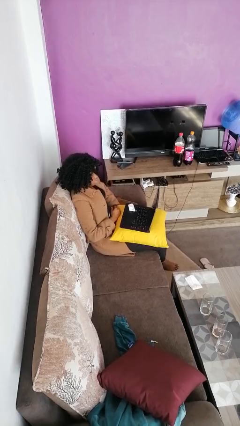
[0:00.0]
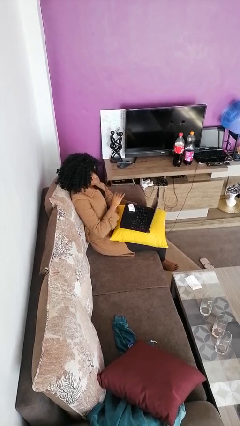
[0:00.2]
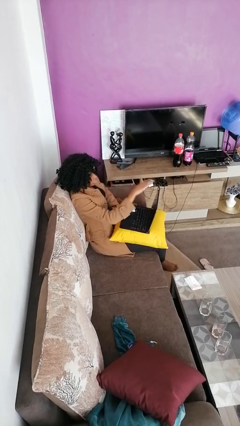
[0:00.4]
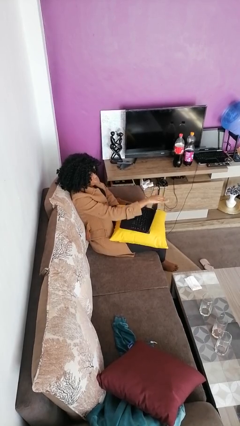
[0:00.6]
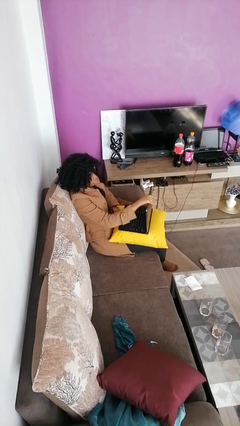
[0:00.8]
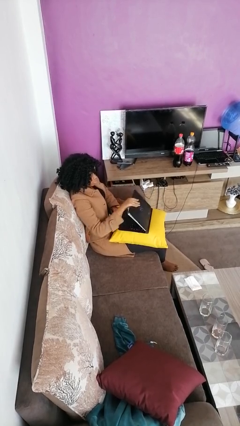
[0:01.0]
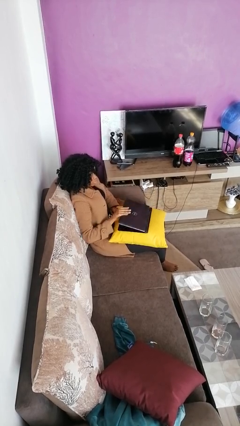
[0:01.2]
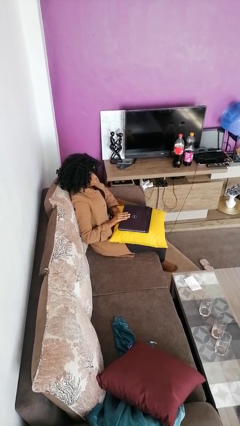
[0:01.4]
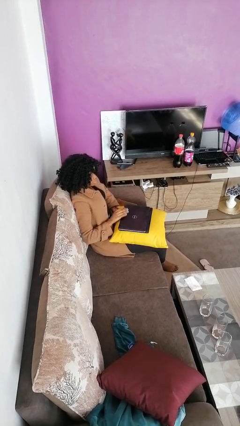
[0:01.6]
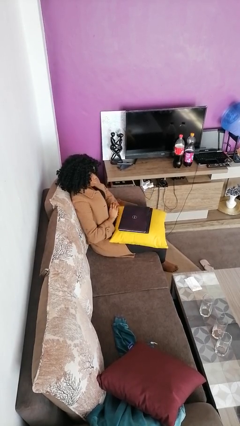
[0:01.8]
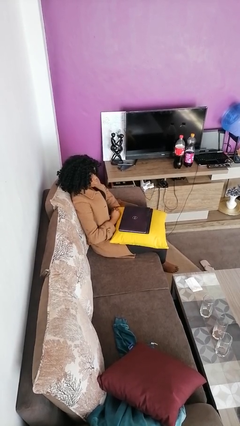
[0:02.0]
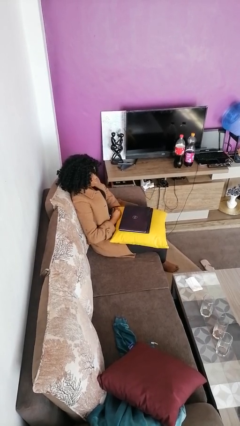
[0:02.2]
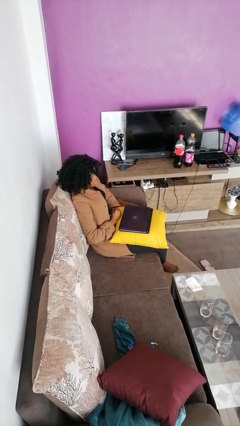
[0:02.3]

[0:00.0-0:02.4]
person closes laptop

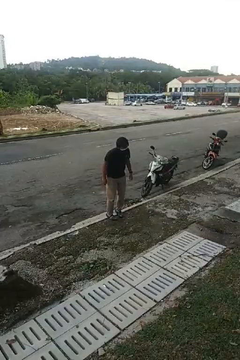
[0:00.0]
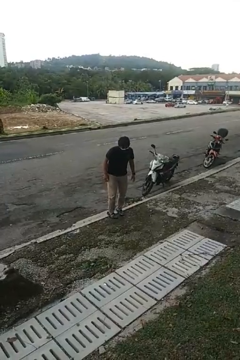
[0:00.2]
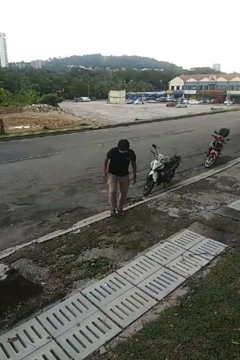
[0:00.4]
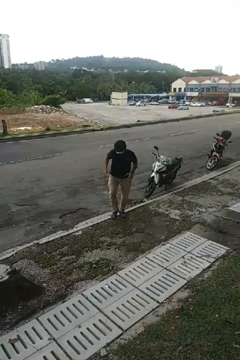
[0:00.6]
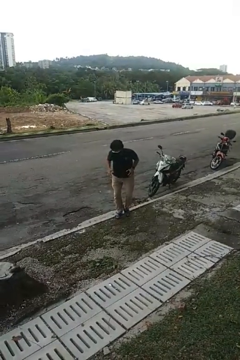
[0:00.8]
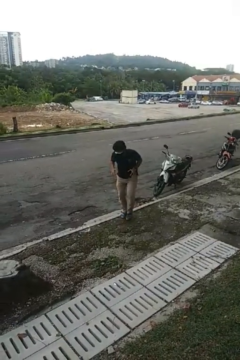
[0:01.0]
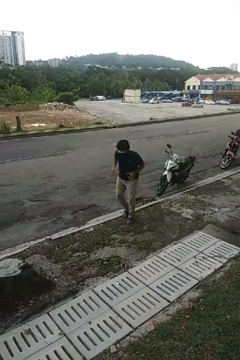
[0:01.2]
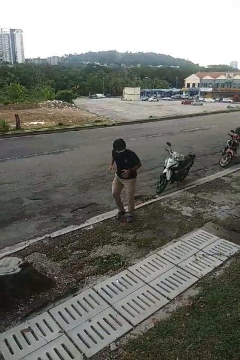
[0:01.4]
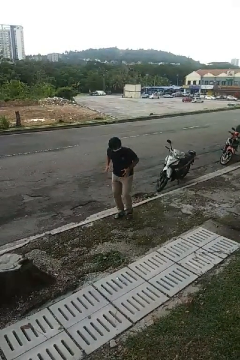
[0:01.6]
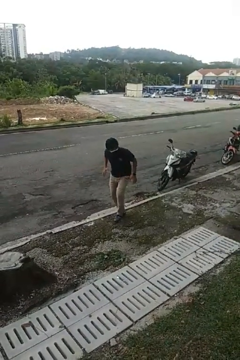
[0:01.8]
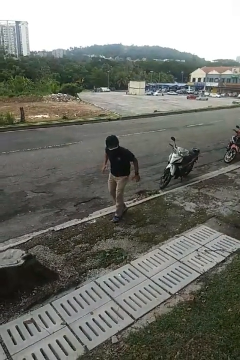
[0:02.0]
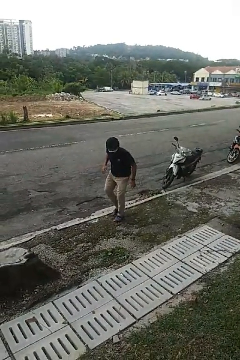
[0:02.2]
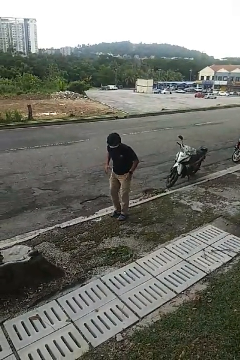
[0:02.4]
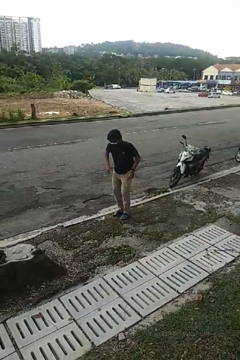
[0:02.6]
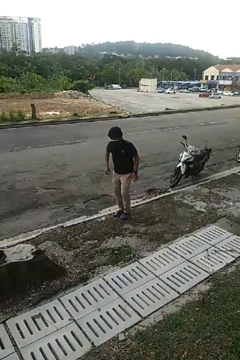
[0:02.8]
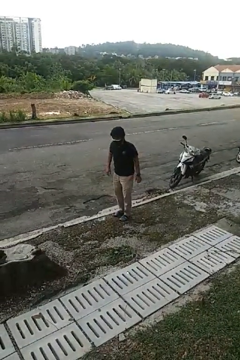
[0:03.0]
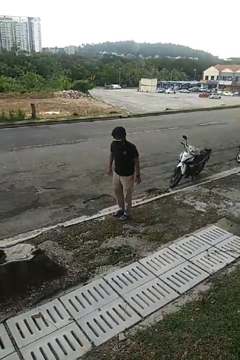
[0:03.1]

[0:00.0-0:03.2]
person walks tiptoe

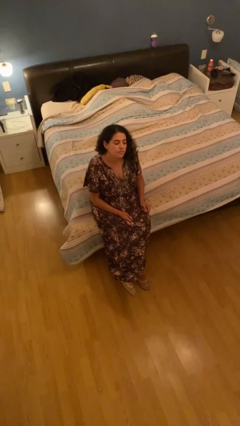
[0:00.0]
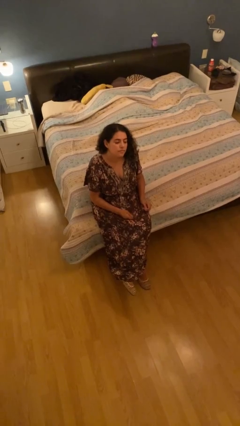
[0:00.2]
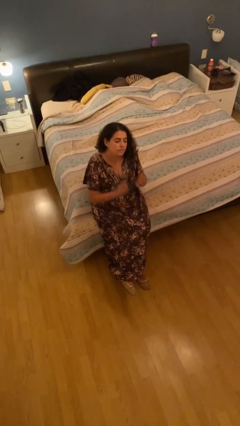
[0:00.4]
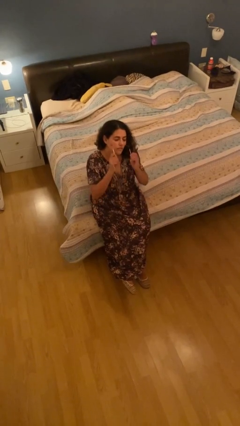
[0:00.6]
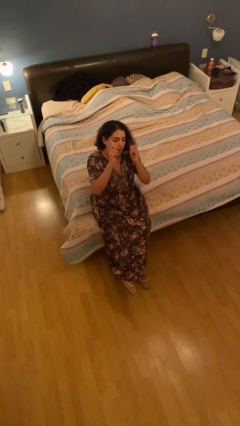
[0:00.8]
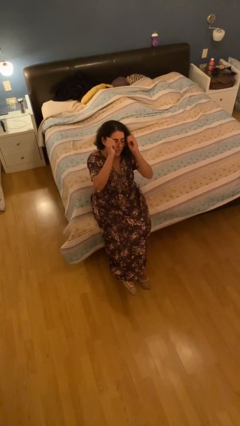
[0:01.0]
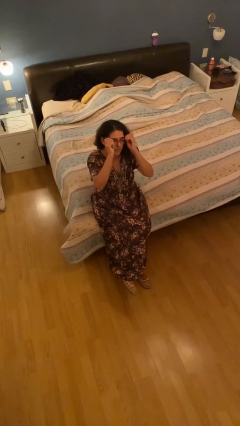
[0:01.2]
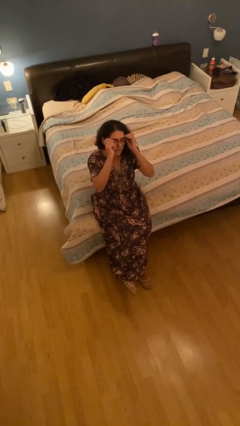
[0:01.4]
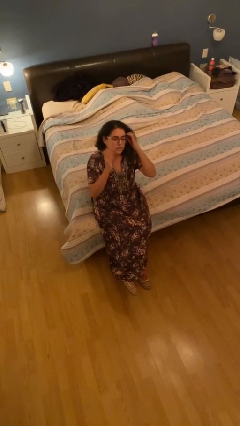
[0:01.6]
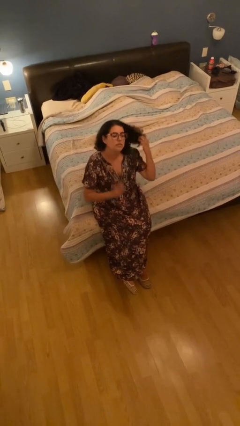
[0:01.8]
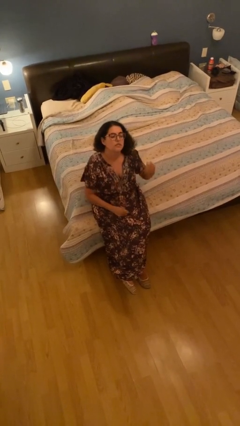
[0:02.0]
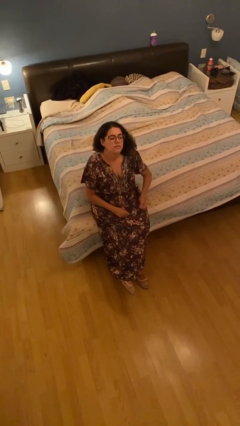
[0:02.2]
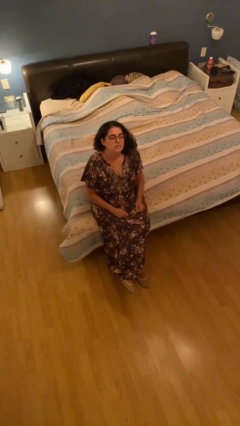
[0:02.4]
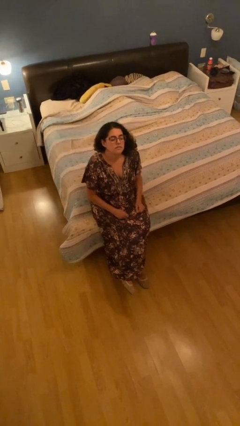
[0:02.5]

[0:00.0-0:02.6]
person puts on glasses

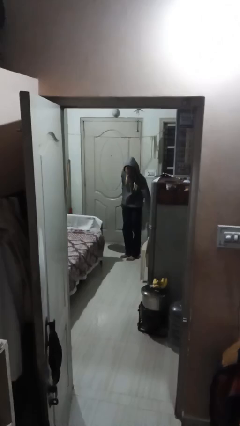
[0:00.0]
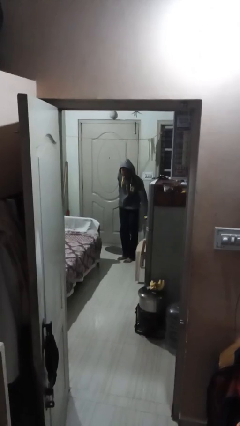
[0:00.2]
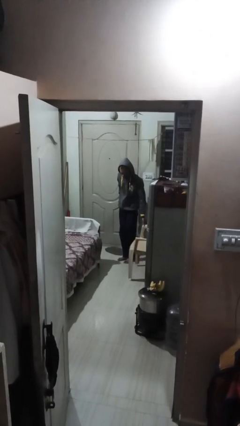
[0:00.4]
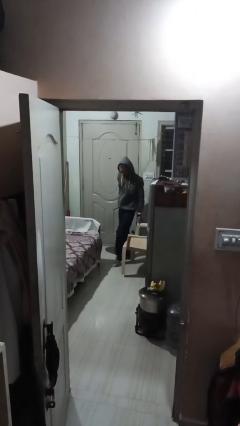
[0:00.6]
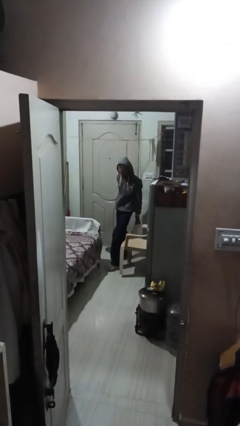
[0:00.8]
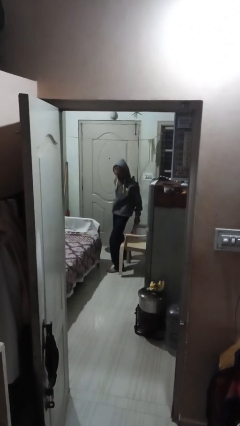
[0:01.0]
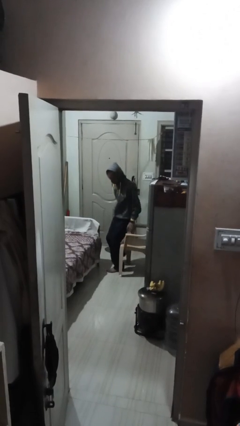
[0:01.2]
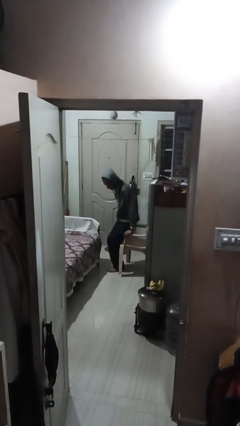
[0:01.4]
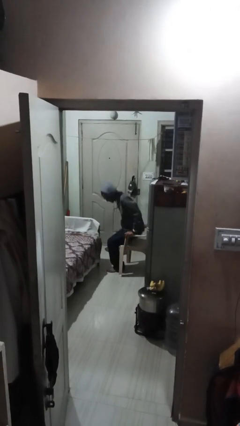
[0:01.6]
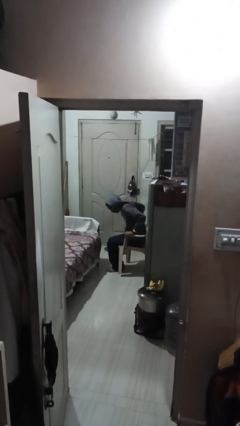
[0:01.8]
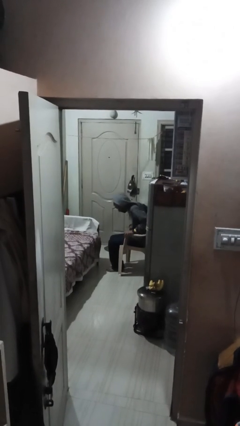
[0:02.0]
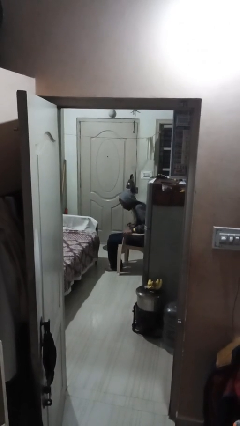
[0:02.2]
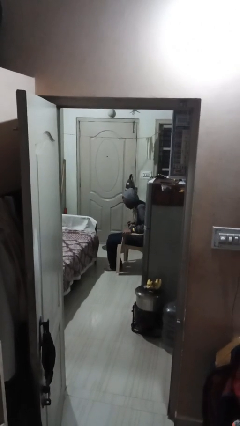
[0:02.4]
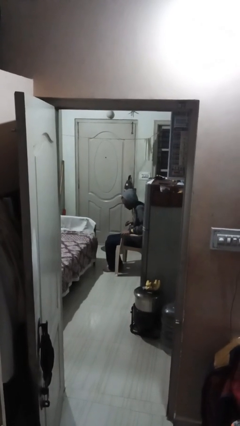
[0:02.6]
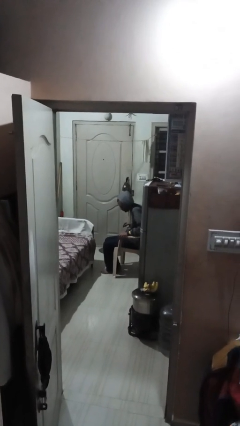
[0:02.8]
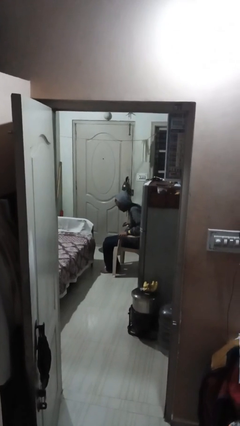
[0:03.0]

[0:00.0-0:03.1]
person sits down

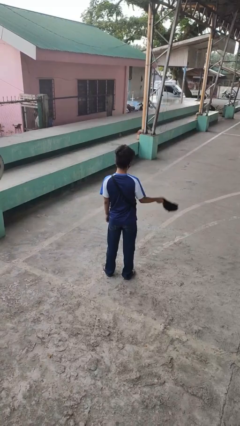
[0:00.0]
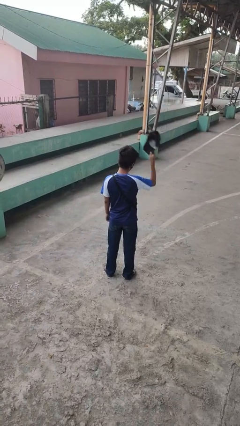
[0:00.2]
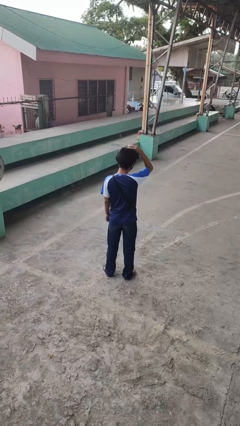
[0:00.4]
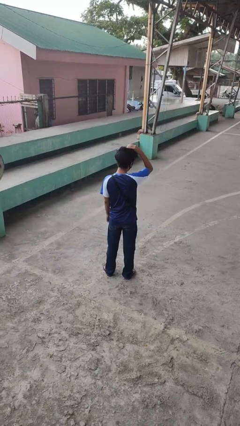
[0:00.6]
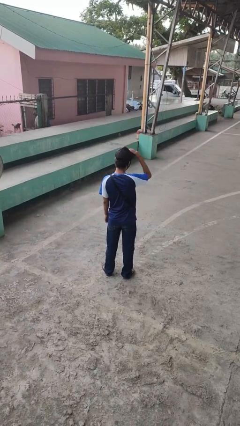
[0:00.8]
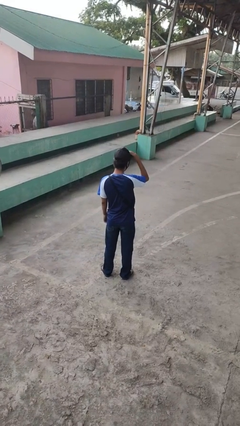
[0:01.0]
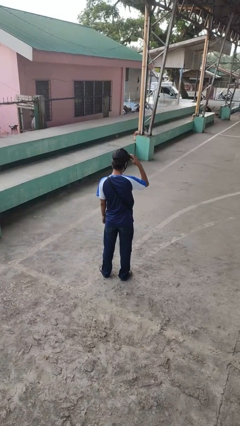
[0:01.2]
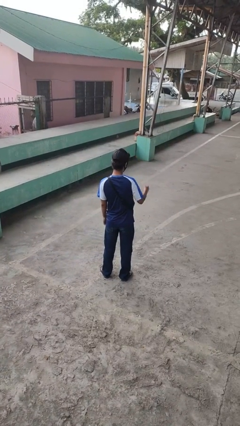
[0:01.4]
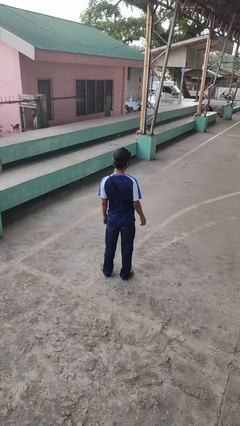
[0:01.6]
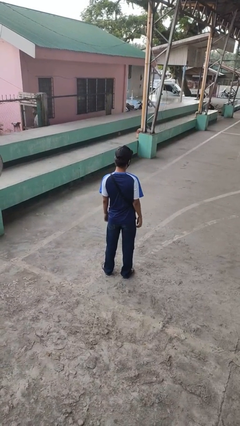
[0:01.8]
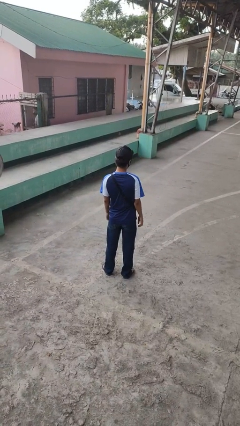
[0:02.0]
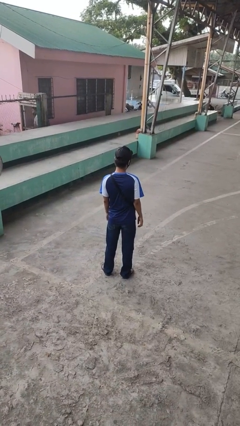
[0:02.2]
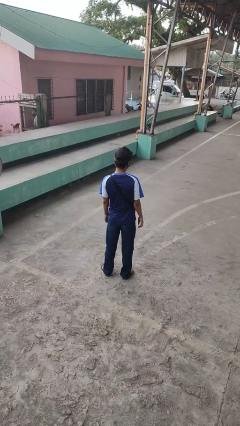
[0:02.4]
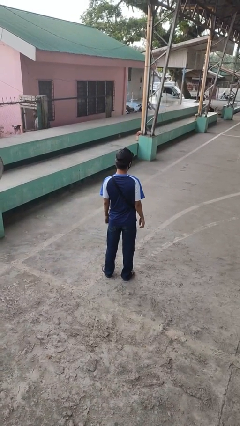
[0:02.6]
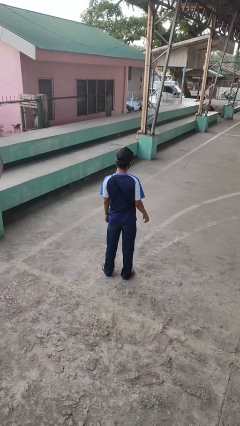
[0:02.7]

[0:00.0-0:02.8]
person puts on hat

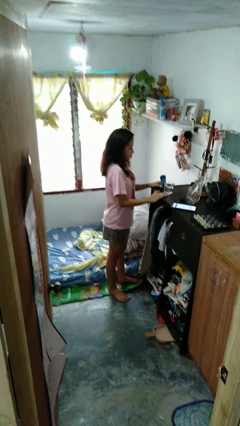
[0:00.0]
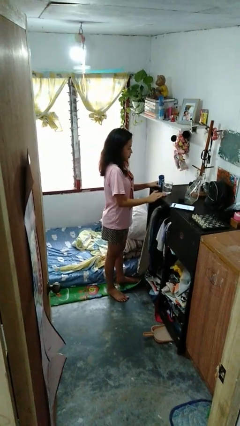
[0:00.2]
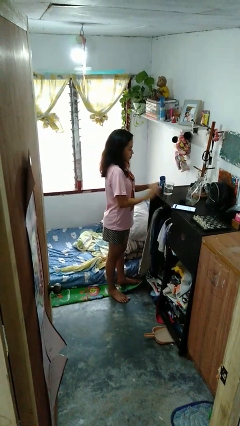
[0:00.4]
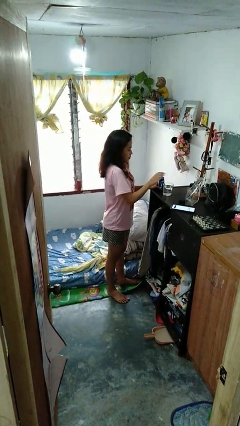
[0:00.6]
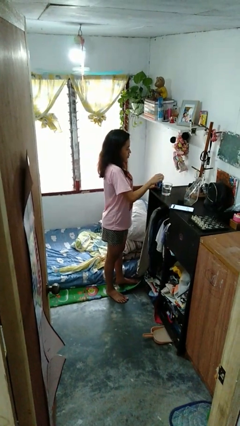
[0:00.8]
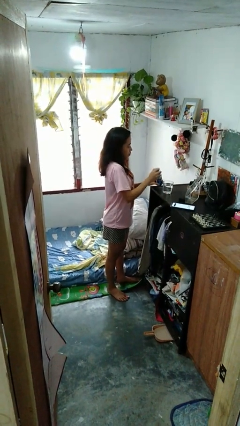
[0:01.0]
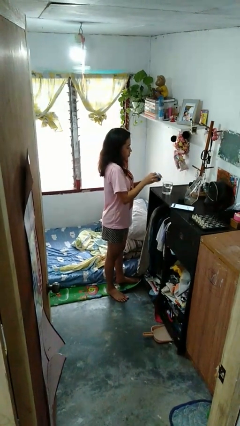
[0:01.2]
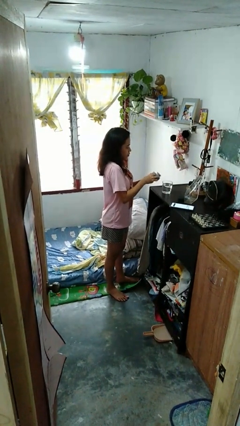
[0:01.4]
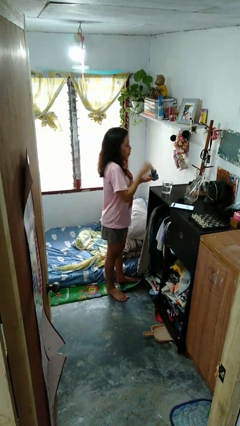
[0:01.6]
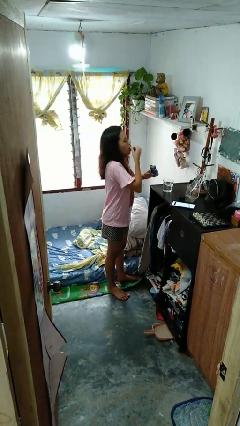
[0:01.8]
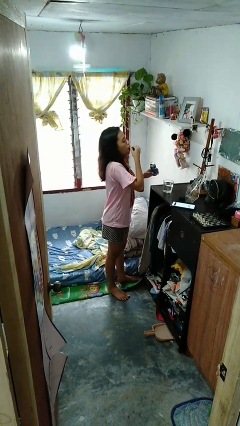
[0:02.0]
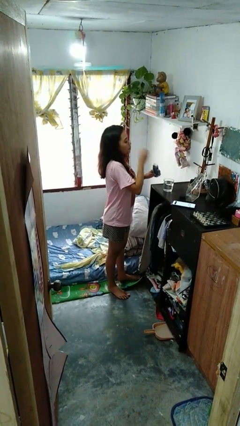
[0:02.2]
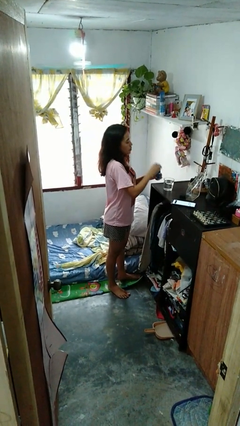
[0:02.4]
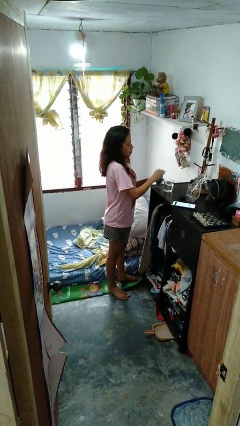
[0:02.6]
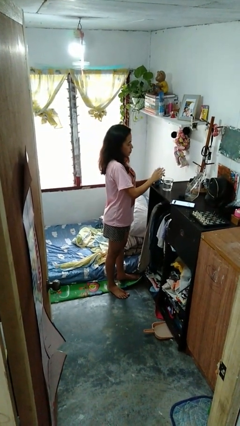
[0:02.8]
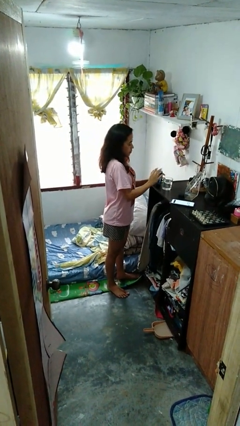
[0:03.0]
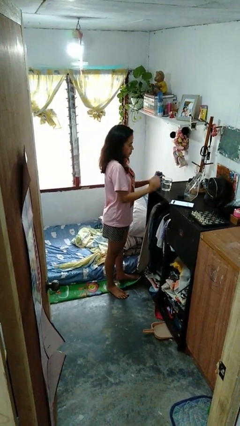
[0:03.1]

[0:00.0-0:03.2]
person takes medicine pills

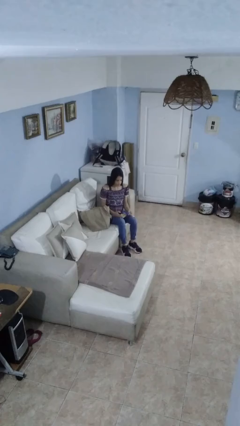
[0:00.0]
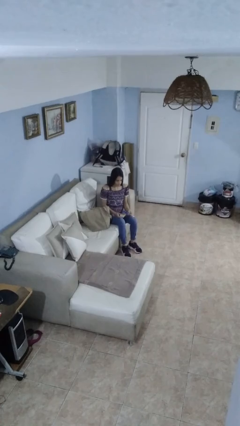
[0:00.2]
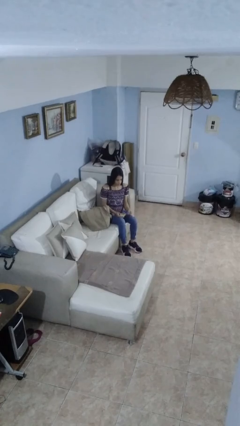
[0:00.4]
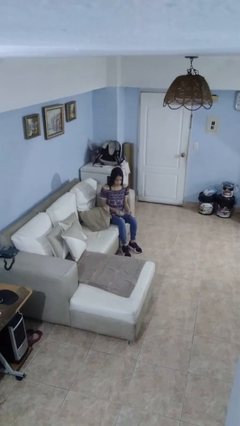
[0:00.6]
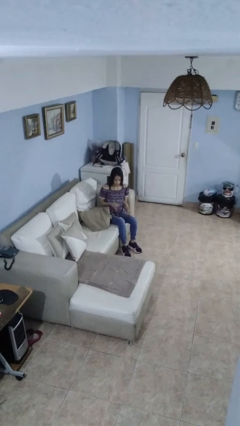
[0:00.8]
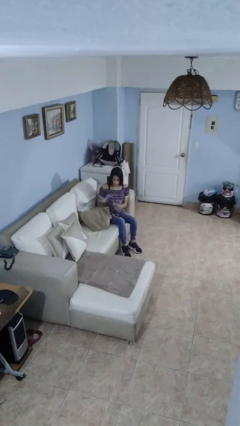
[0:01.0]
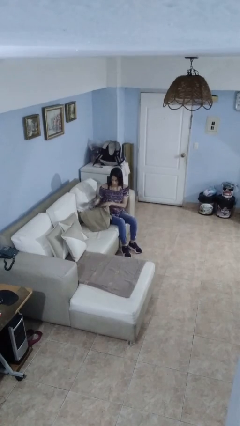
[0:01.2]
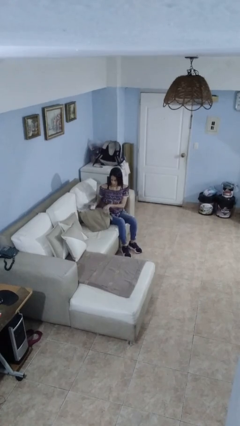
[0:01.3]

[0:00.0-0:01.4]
person puts object into bag
